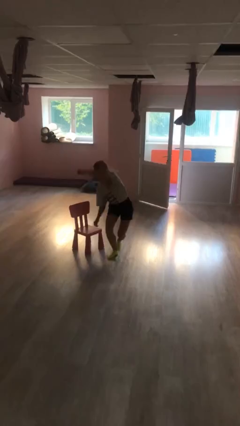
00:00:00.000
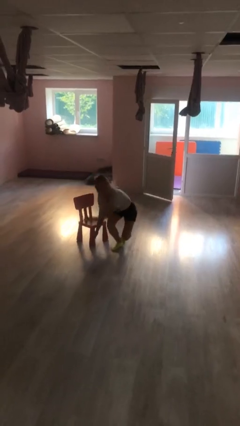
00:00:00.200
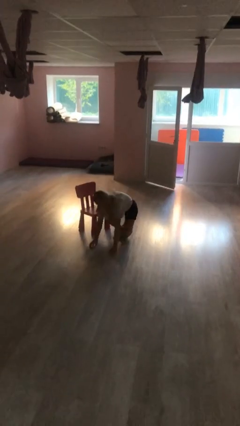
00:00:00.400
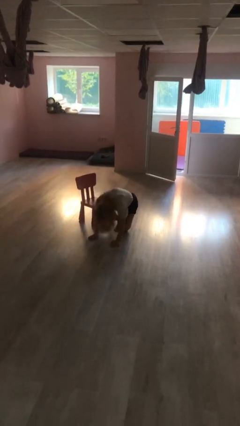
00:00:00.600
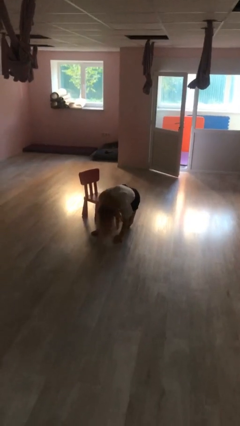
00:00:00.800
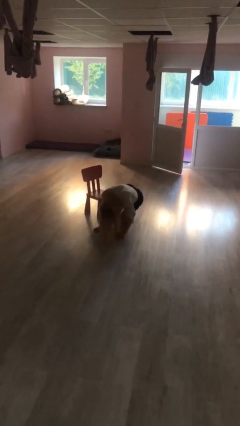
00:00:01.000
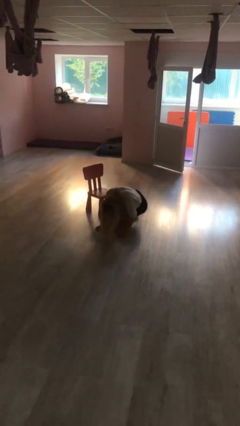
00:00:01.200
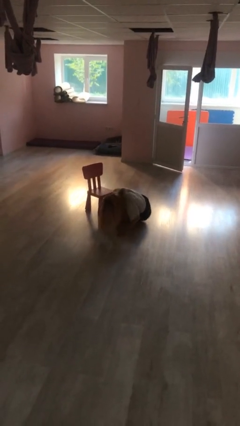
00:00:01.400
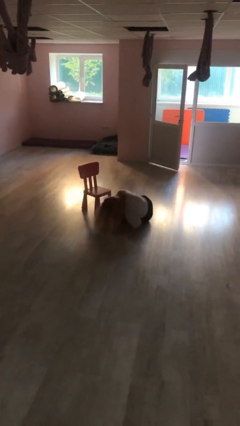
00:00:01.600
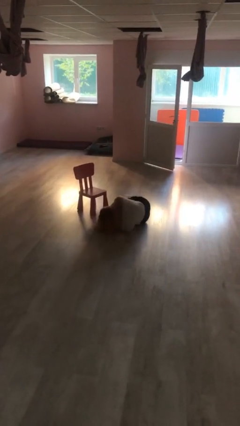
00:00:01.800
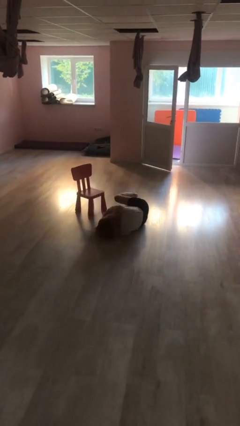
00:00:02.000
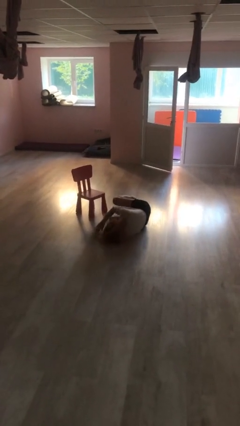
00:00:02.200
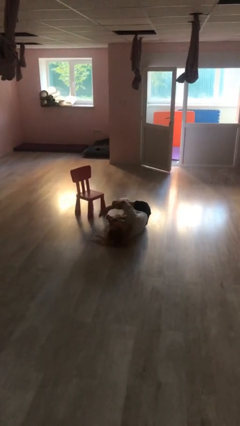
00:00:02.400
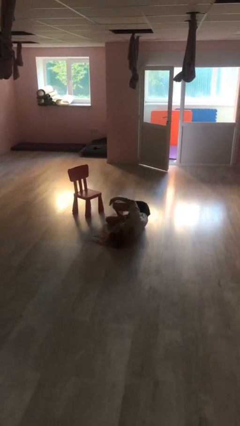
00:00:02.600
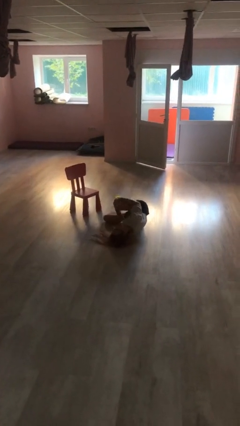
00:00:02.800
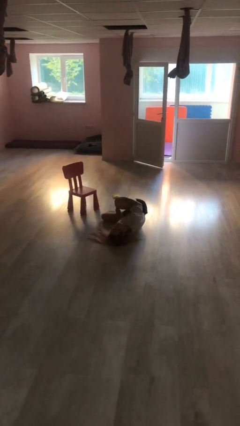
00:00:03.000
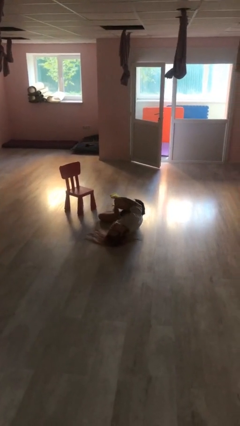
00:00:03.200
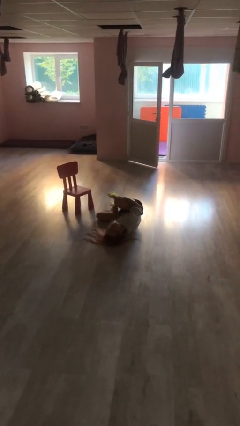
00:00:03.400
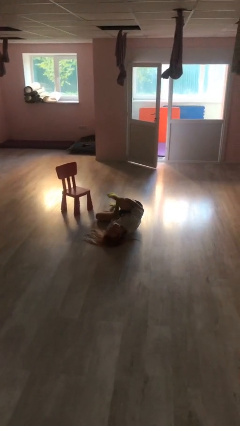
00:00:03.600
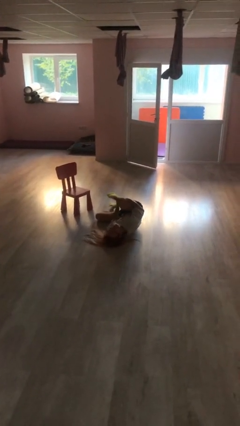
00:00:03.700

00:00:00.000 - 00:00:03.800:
person lies down on floor

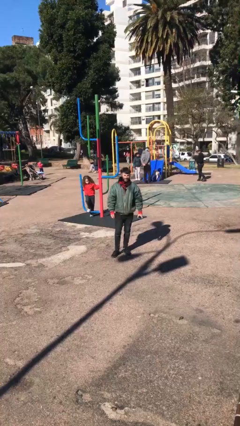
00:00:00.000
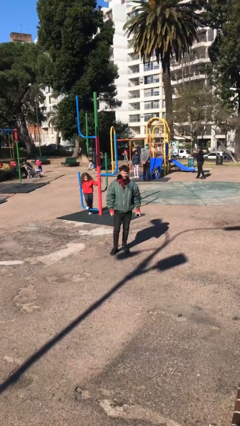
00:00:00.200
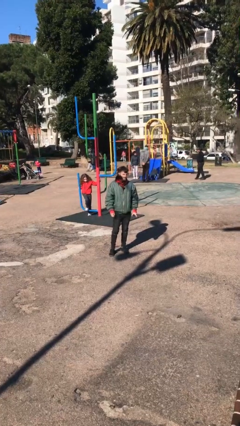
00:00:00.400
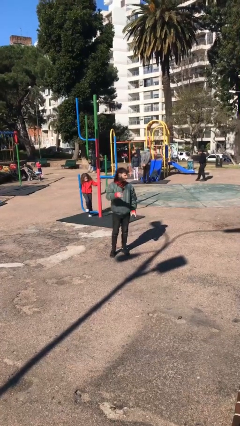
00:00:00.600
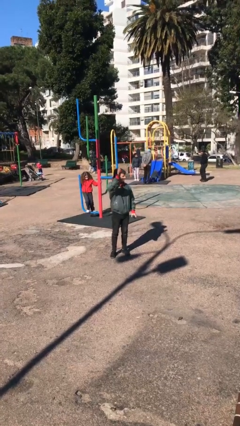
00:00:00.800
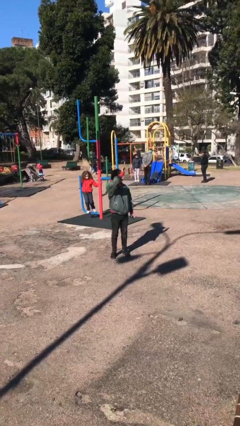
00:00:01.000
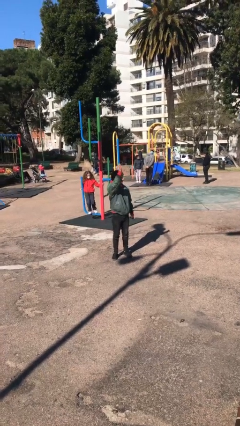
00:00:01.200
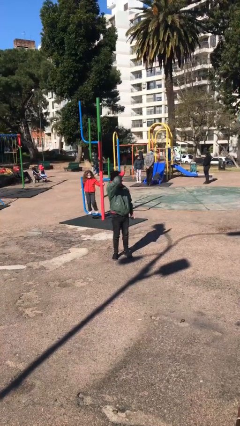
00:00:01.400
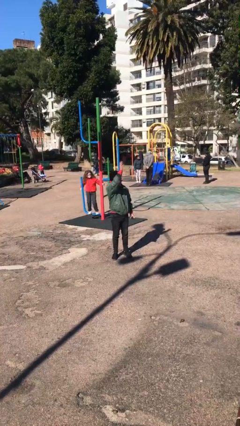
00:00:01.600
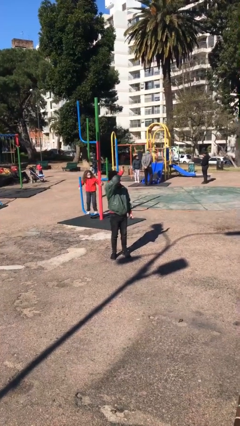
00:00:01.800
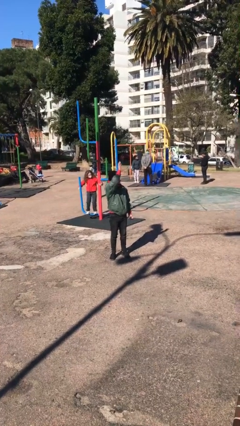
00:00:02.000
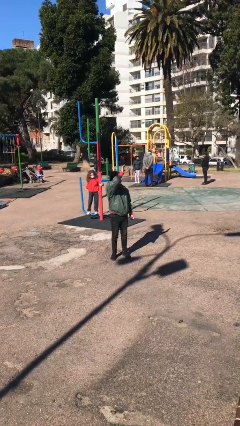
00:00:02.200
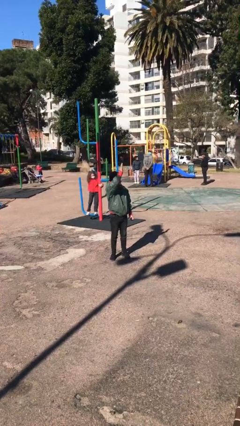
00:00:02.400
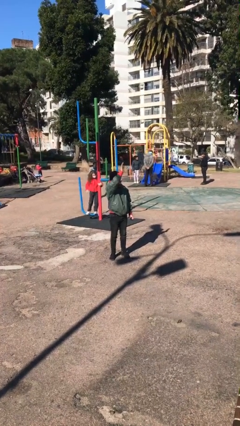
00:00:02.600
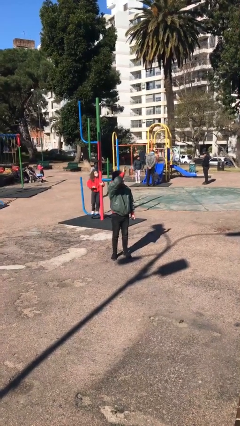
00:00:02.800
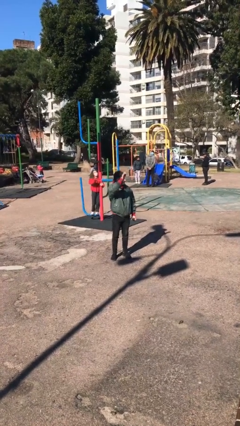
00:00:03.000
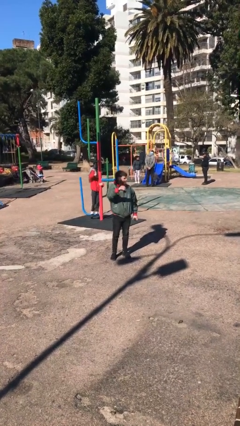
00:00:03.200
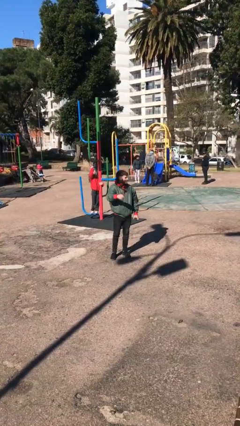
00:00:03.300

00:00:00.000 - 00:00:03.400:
person waves at person

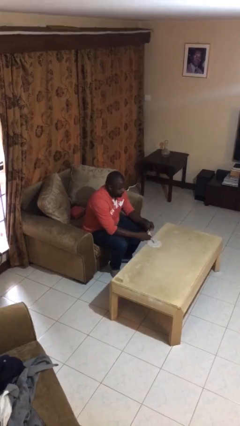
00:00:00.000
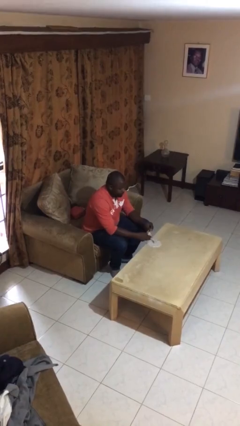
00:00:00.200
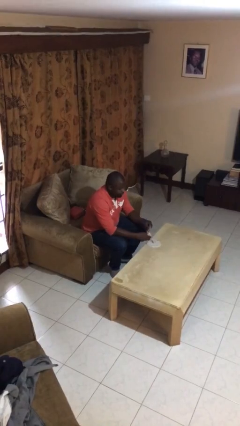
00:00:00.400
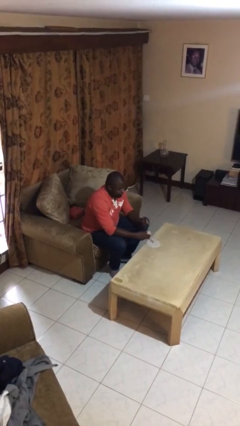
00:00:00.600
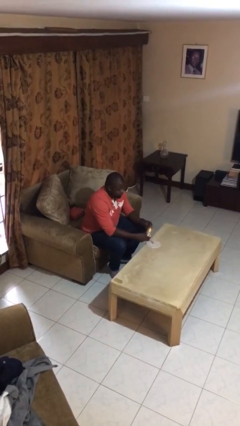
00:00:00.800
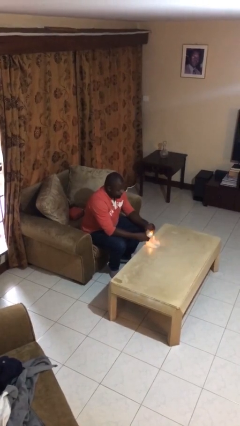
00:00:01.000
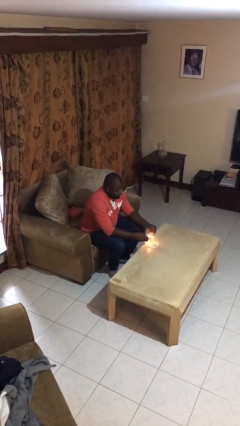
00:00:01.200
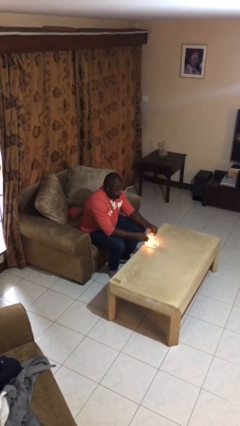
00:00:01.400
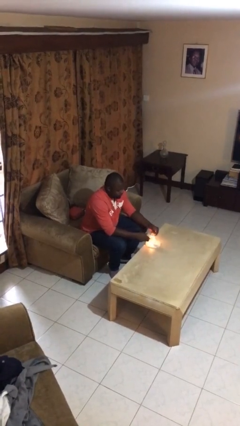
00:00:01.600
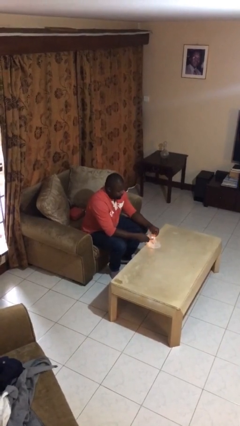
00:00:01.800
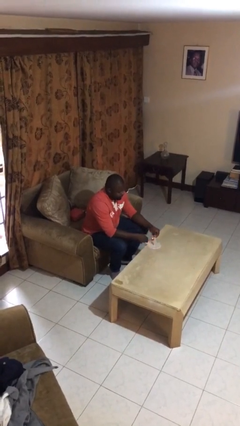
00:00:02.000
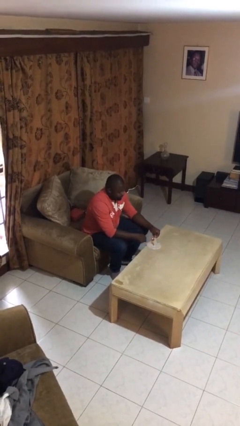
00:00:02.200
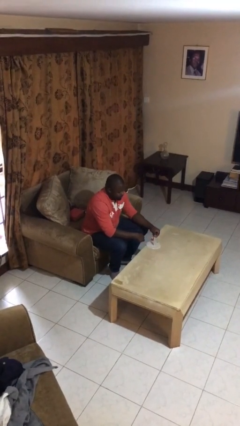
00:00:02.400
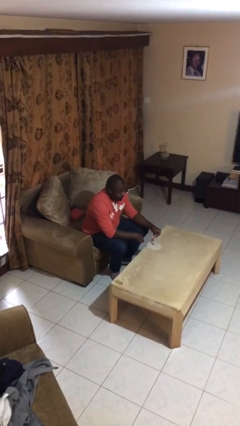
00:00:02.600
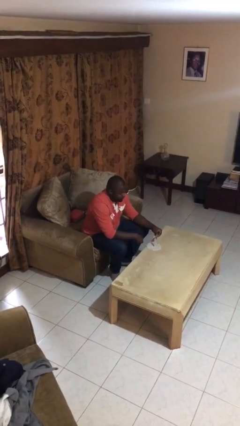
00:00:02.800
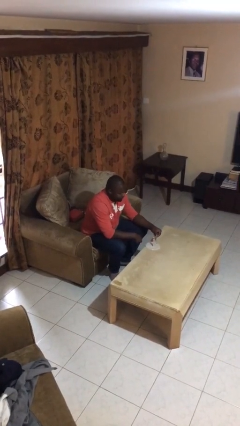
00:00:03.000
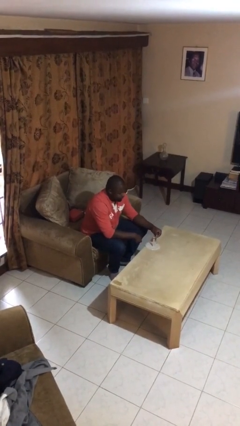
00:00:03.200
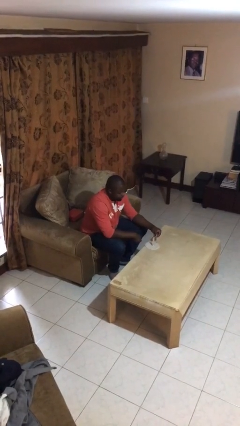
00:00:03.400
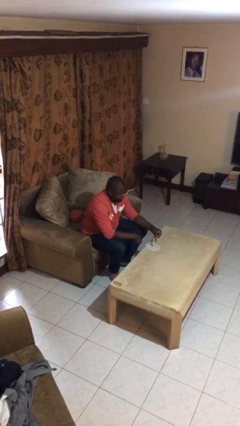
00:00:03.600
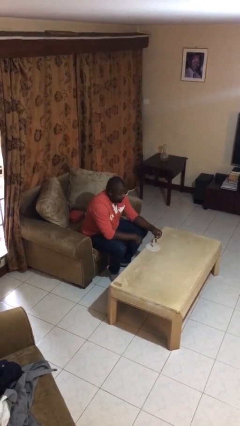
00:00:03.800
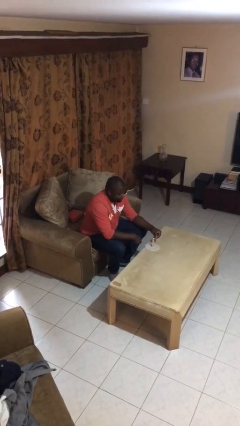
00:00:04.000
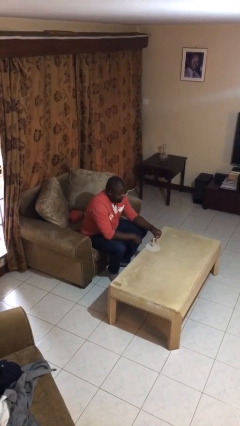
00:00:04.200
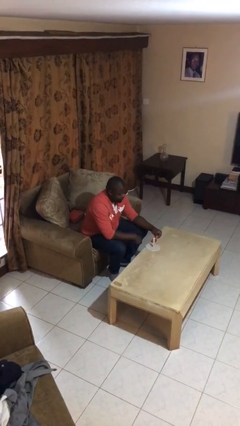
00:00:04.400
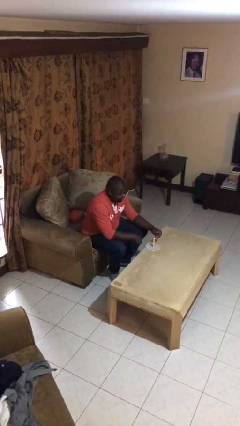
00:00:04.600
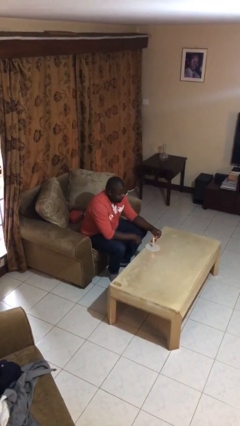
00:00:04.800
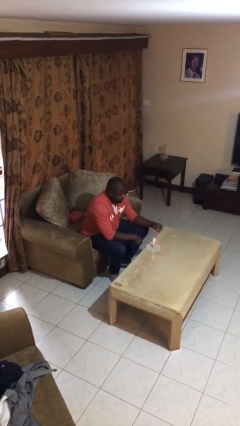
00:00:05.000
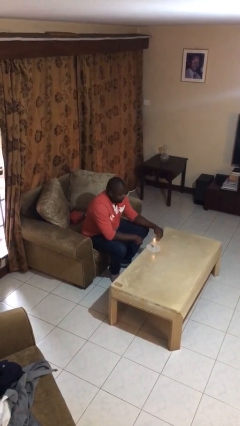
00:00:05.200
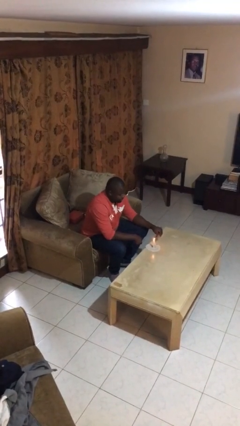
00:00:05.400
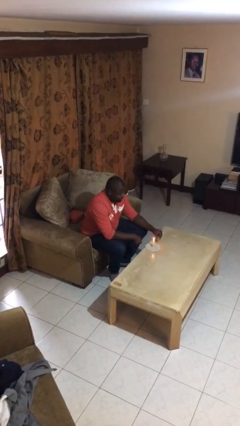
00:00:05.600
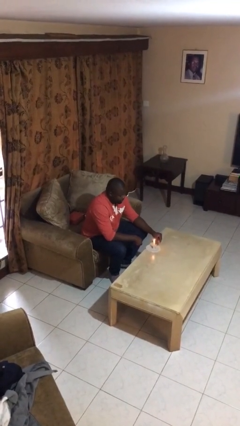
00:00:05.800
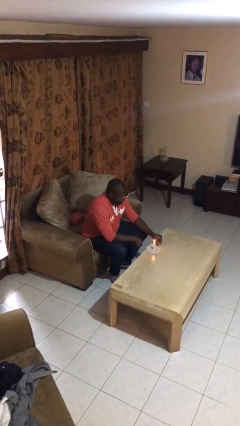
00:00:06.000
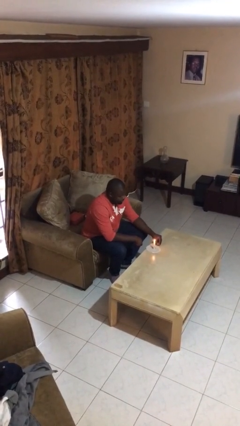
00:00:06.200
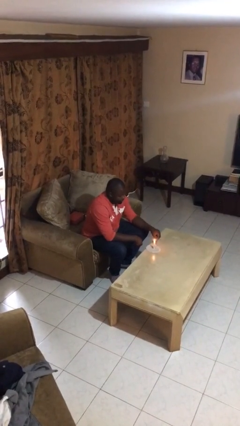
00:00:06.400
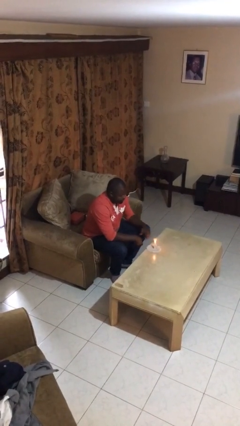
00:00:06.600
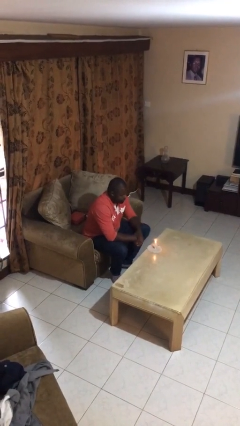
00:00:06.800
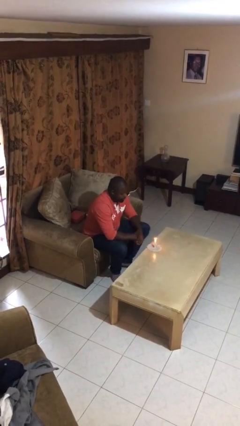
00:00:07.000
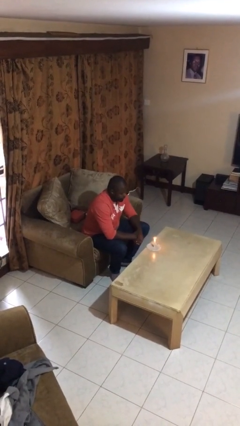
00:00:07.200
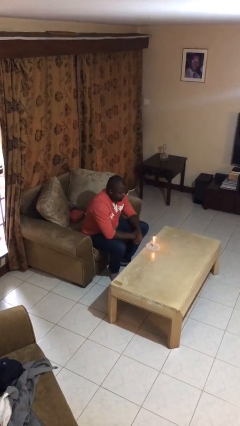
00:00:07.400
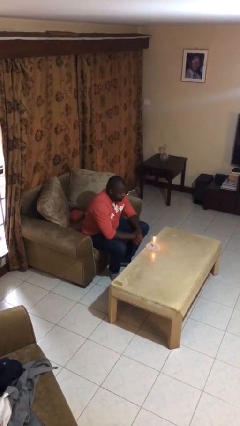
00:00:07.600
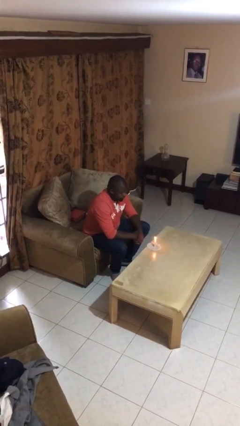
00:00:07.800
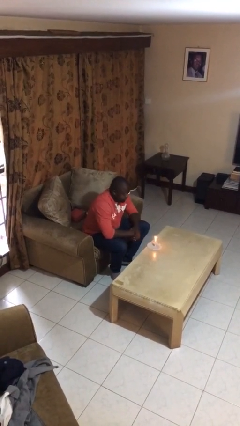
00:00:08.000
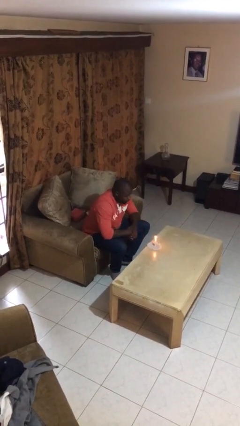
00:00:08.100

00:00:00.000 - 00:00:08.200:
person lights candle

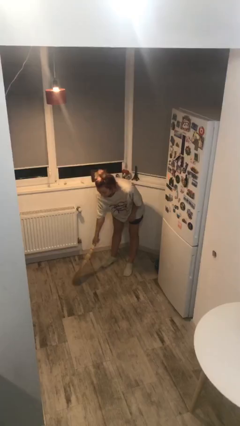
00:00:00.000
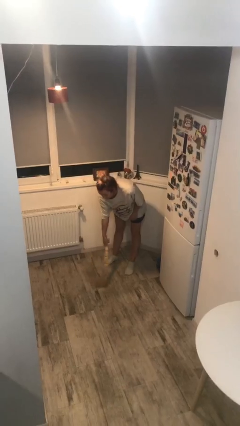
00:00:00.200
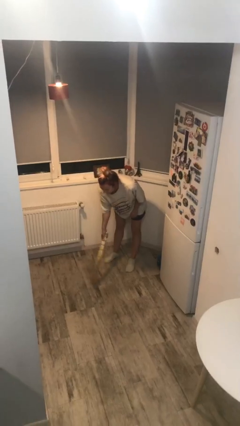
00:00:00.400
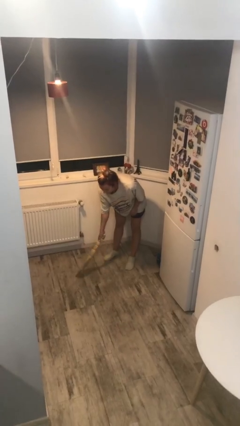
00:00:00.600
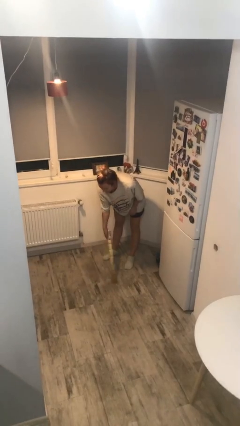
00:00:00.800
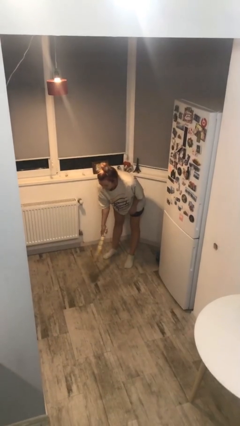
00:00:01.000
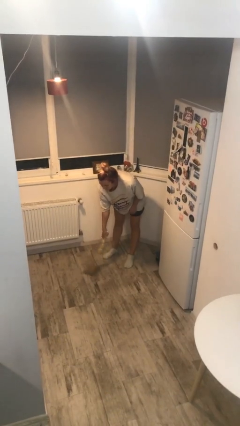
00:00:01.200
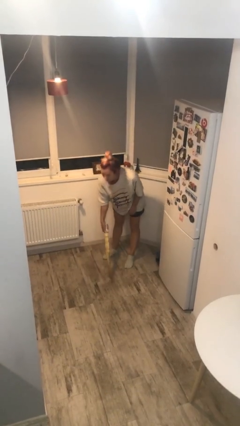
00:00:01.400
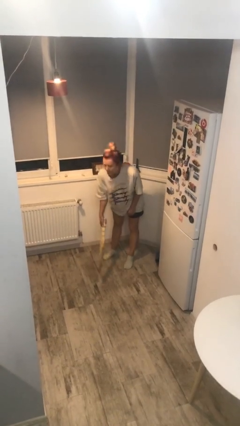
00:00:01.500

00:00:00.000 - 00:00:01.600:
person sweeps floor

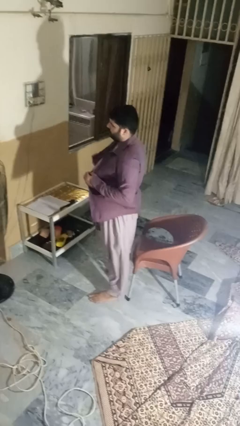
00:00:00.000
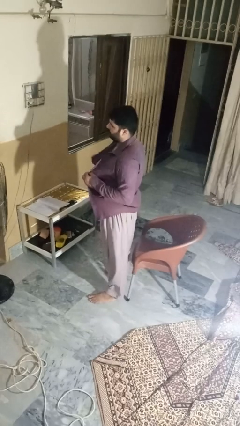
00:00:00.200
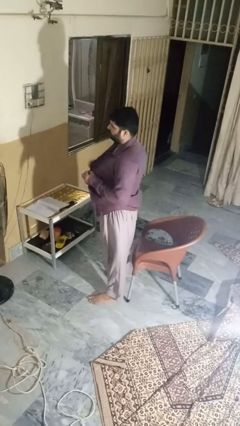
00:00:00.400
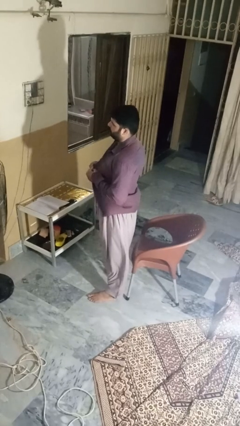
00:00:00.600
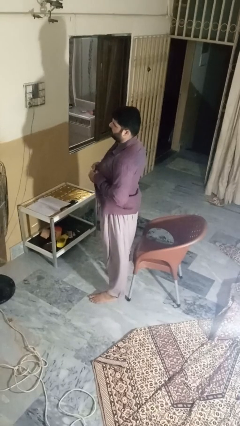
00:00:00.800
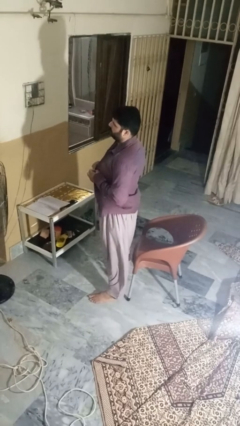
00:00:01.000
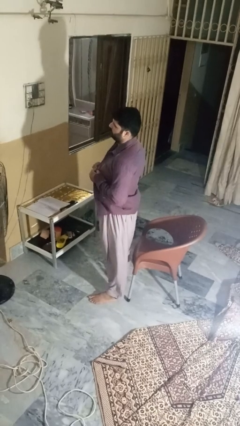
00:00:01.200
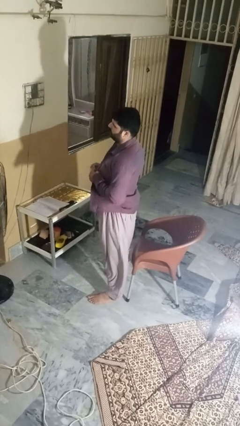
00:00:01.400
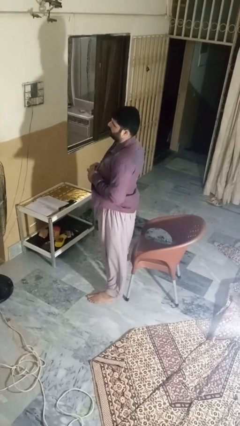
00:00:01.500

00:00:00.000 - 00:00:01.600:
person buttons shirt
